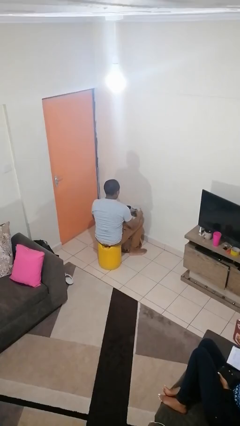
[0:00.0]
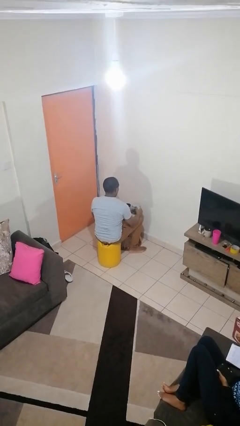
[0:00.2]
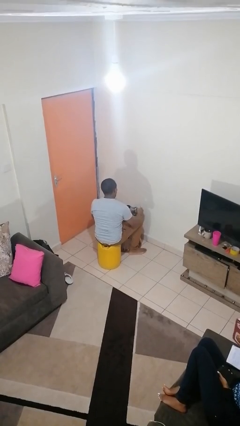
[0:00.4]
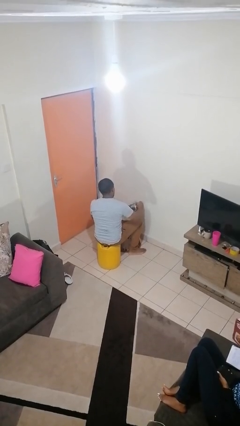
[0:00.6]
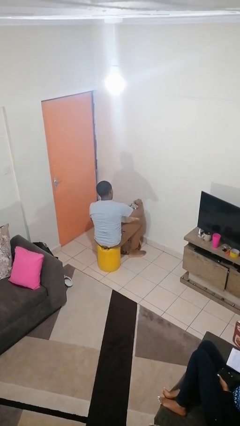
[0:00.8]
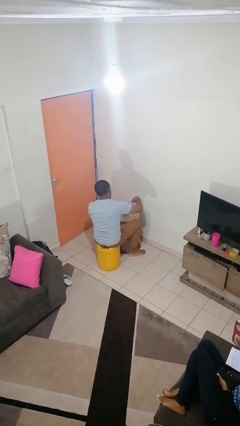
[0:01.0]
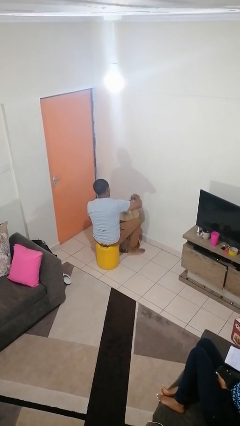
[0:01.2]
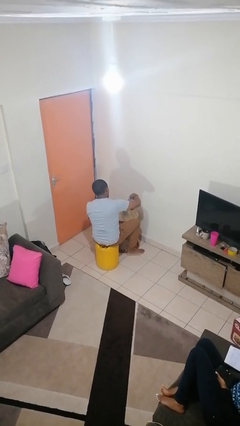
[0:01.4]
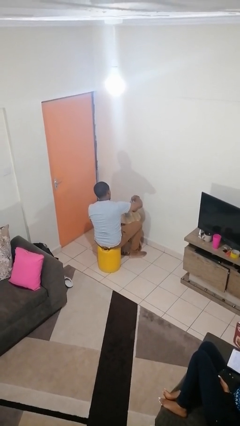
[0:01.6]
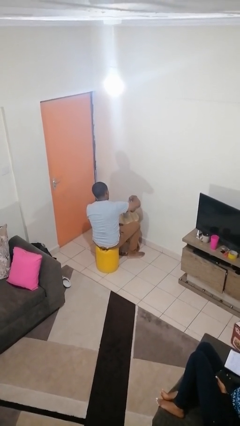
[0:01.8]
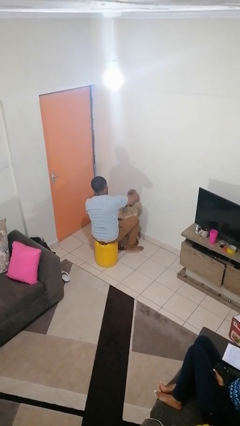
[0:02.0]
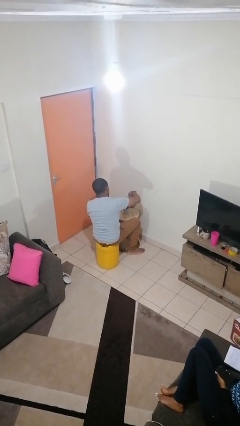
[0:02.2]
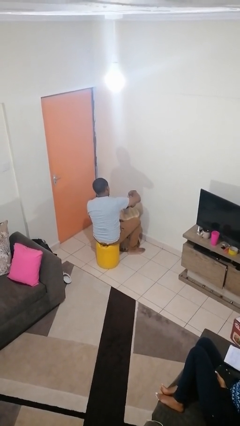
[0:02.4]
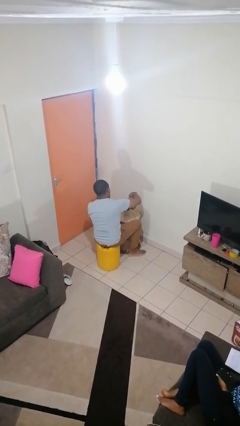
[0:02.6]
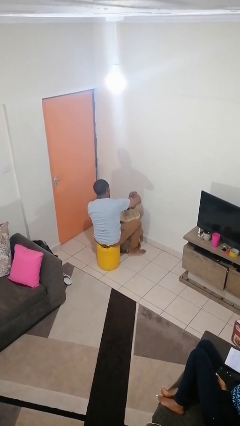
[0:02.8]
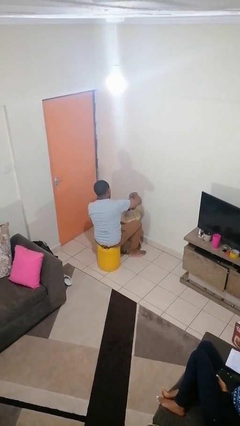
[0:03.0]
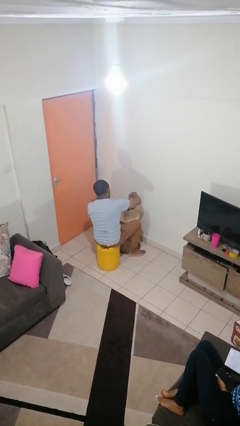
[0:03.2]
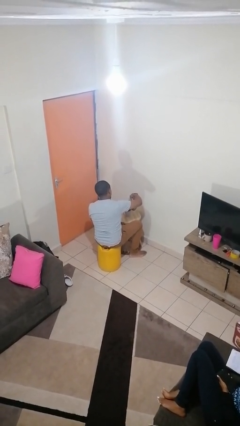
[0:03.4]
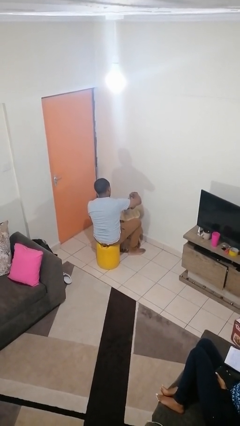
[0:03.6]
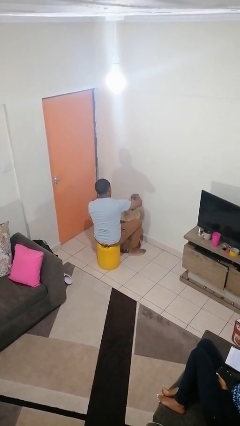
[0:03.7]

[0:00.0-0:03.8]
person pours coffee into mug

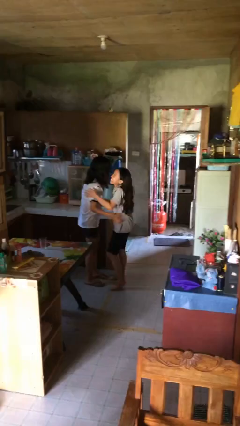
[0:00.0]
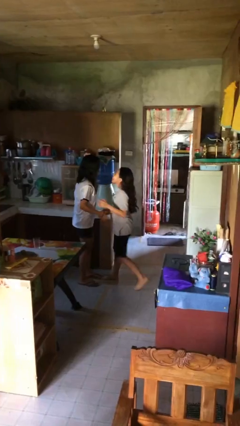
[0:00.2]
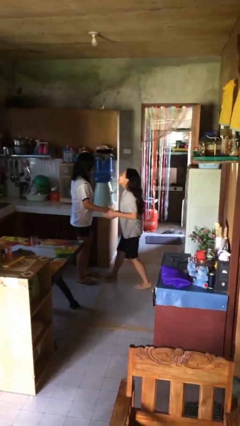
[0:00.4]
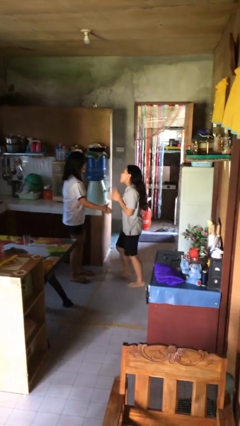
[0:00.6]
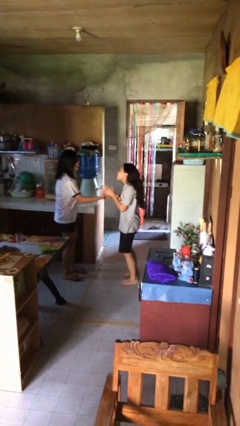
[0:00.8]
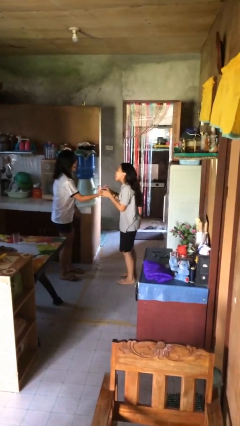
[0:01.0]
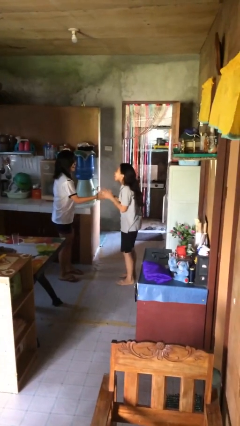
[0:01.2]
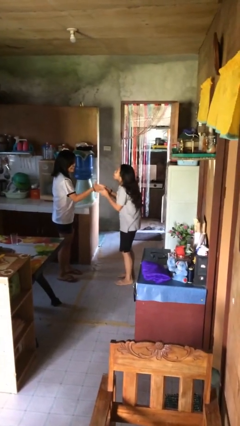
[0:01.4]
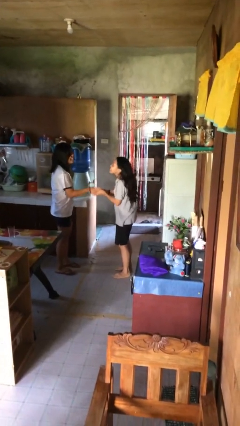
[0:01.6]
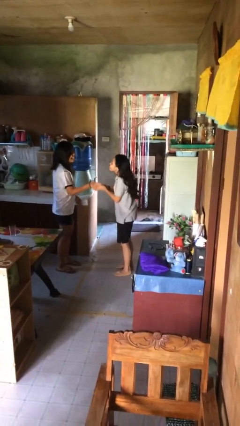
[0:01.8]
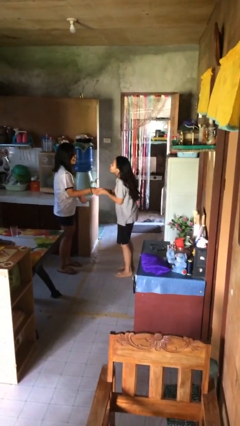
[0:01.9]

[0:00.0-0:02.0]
person talks to person

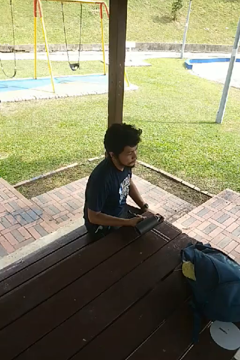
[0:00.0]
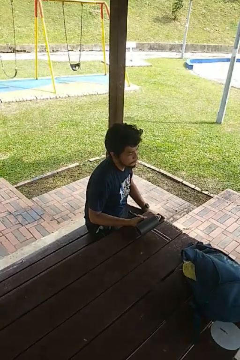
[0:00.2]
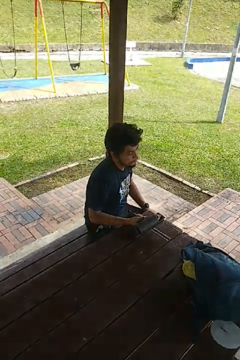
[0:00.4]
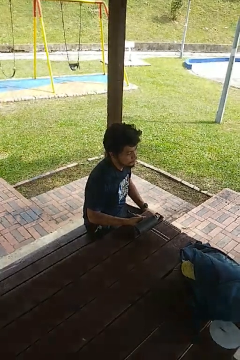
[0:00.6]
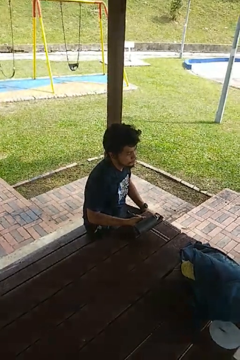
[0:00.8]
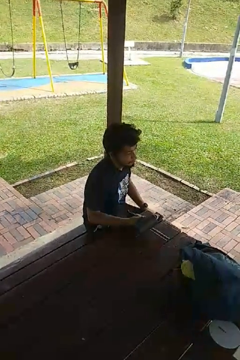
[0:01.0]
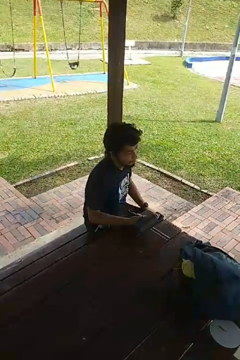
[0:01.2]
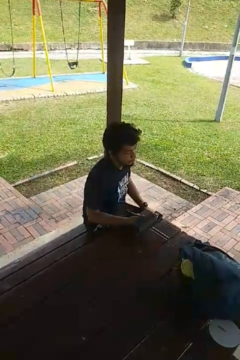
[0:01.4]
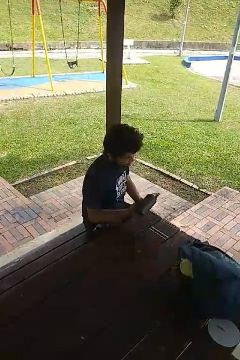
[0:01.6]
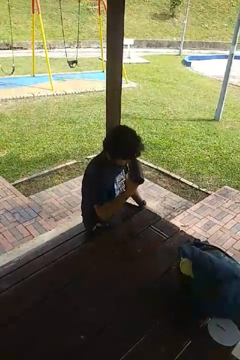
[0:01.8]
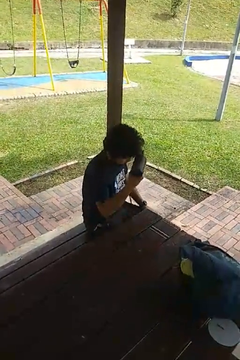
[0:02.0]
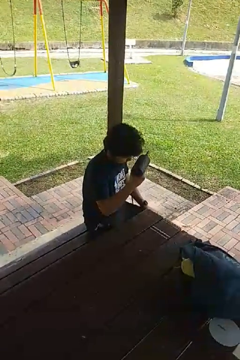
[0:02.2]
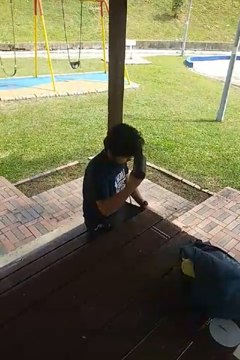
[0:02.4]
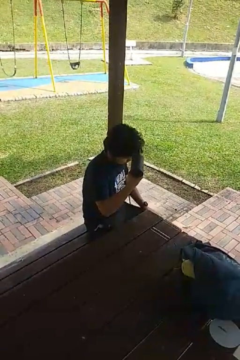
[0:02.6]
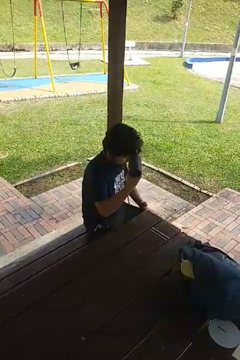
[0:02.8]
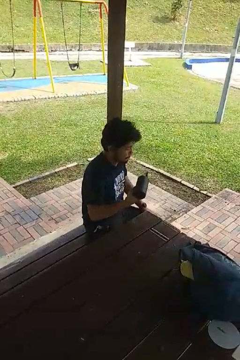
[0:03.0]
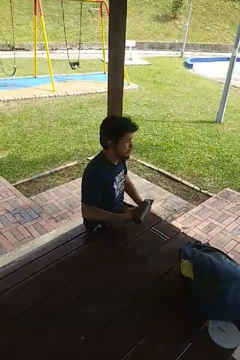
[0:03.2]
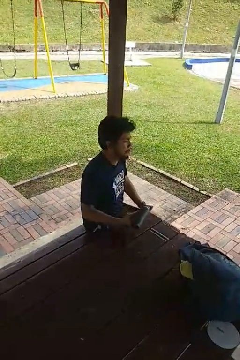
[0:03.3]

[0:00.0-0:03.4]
person dries hair with hairdryer

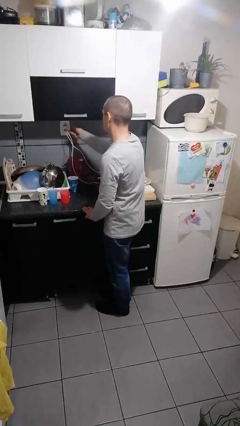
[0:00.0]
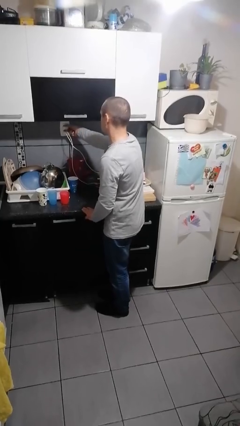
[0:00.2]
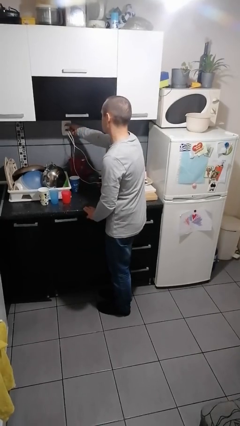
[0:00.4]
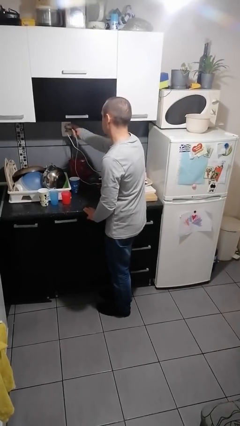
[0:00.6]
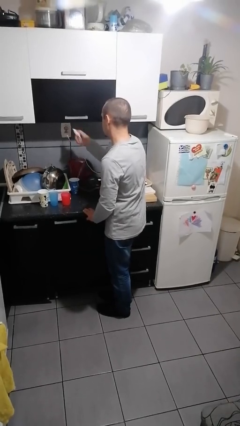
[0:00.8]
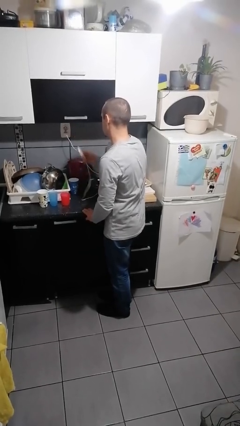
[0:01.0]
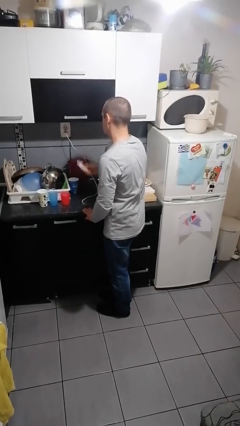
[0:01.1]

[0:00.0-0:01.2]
person unplugs from electrical socket

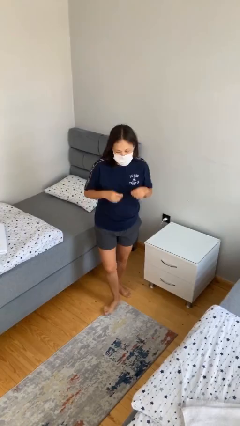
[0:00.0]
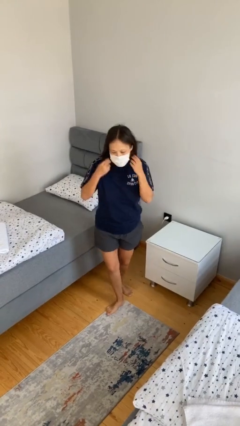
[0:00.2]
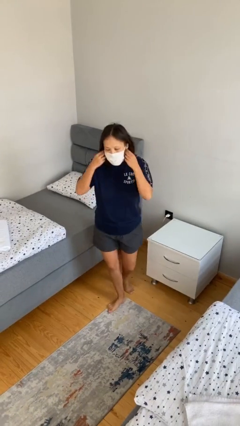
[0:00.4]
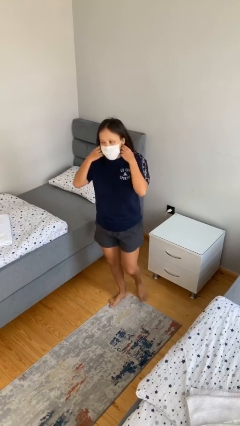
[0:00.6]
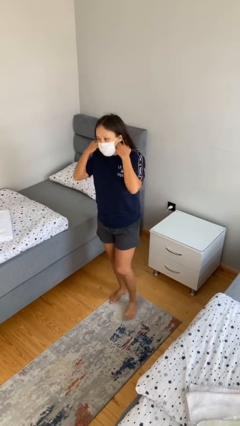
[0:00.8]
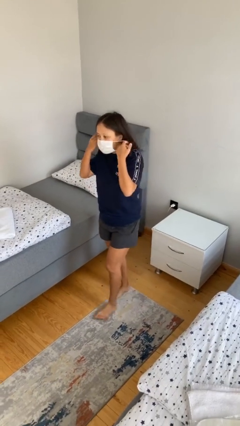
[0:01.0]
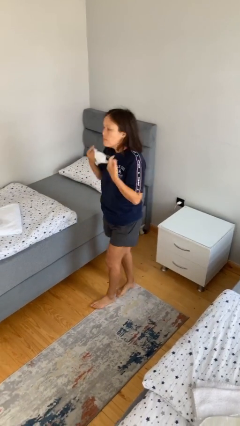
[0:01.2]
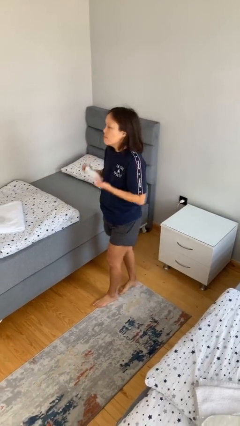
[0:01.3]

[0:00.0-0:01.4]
person takes off facemask

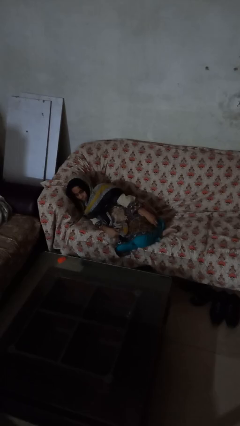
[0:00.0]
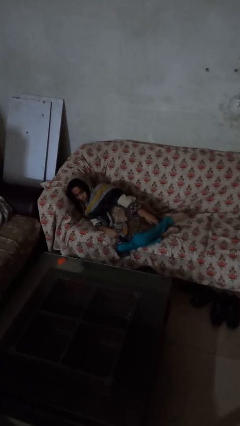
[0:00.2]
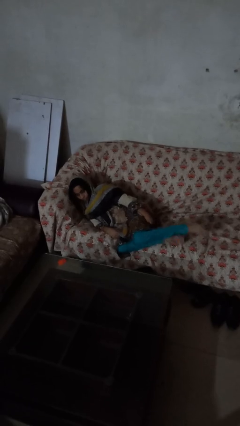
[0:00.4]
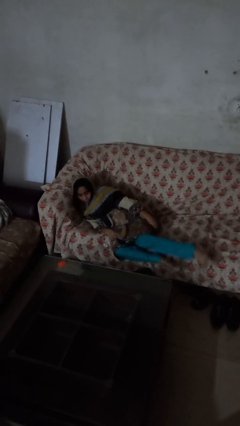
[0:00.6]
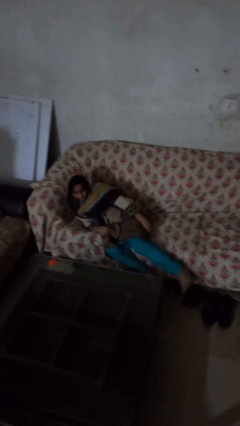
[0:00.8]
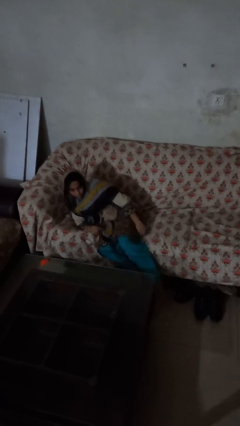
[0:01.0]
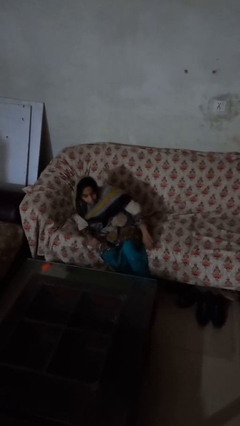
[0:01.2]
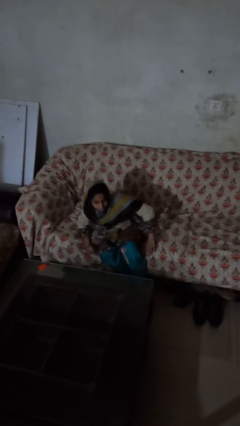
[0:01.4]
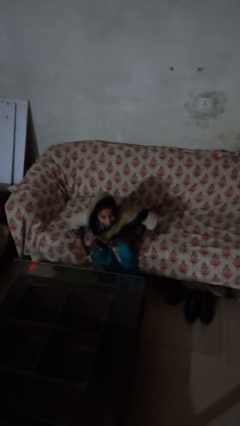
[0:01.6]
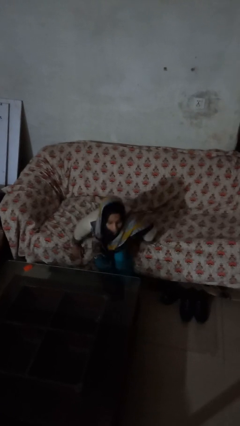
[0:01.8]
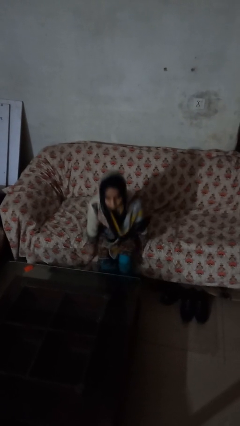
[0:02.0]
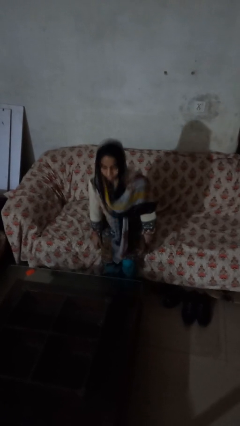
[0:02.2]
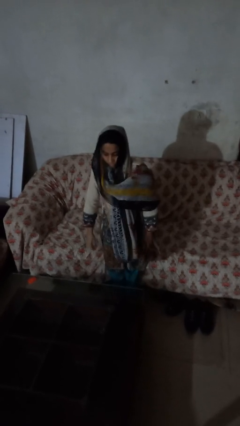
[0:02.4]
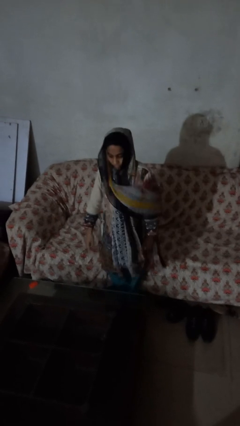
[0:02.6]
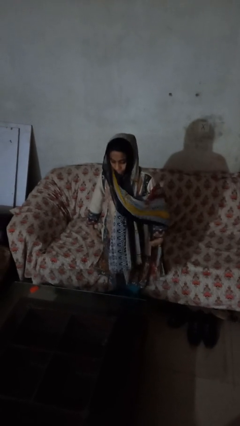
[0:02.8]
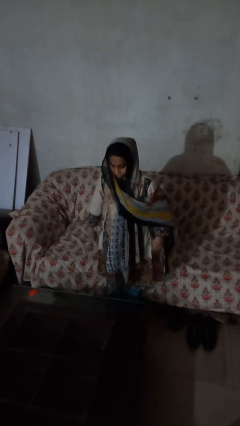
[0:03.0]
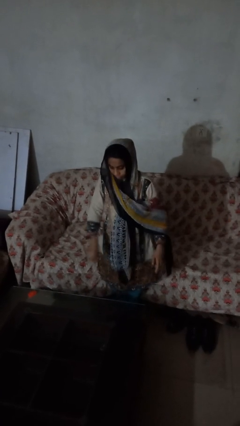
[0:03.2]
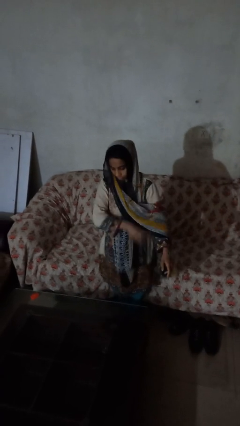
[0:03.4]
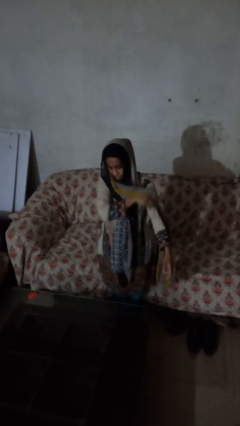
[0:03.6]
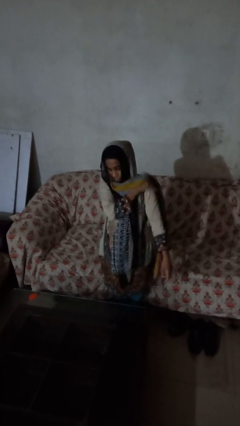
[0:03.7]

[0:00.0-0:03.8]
person stands up

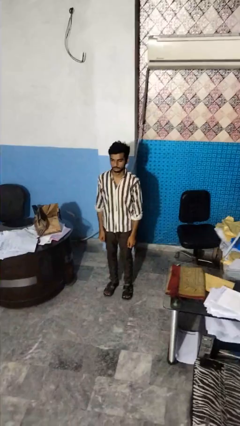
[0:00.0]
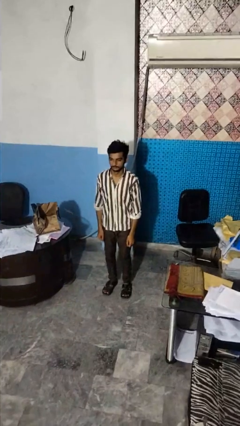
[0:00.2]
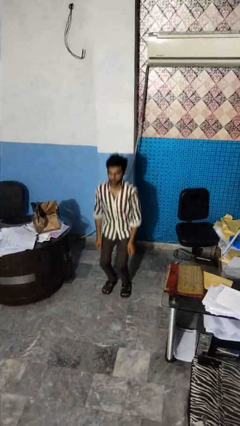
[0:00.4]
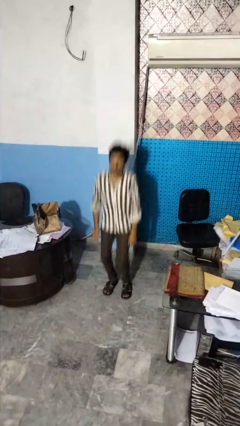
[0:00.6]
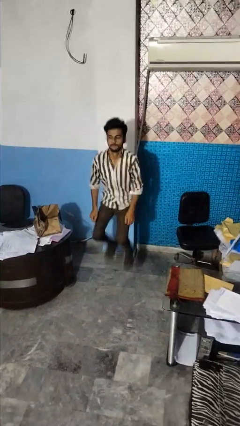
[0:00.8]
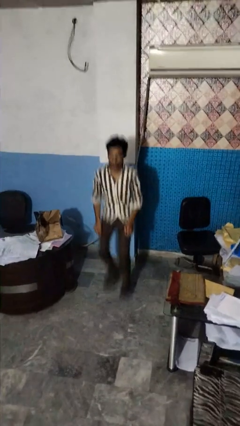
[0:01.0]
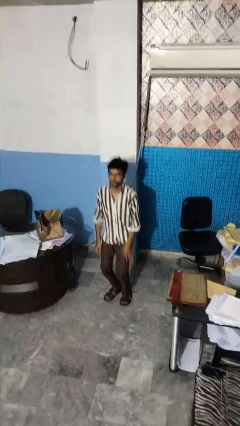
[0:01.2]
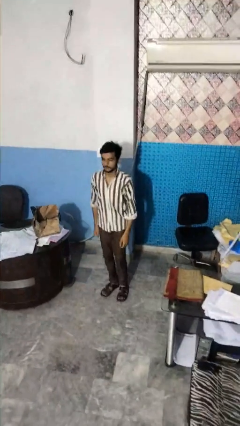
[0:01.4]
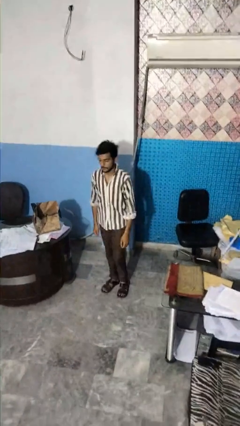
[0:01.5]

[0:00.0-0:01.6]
person jumps

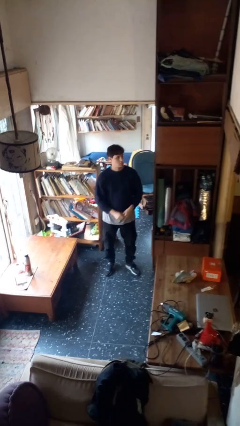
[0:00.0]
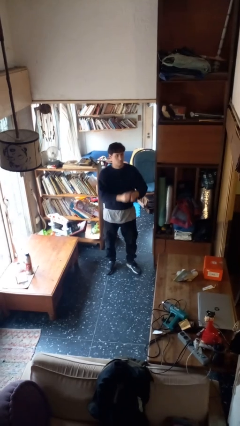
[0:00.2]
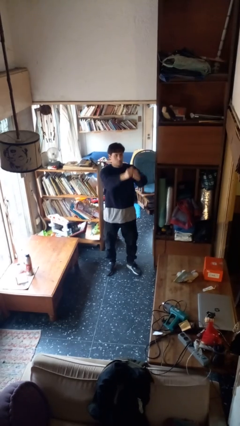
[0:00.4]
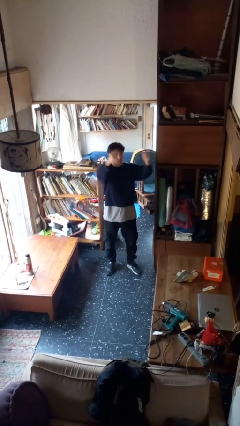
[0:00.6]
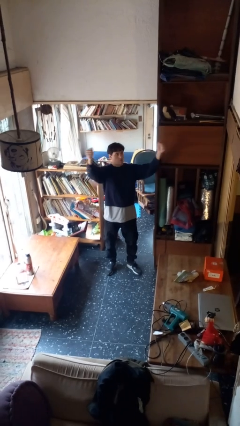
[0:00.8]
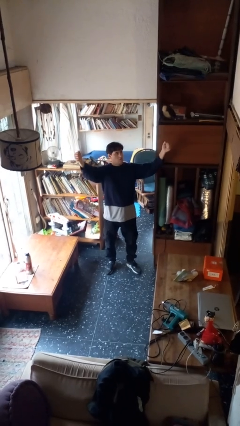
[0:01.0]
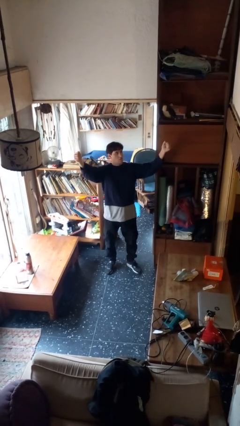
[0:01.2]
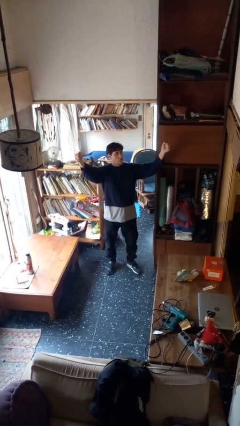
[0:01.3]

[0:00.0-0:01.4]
person gestures zoom in
